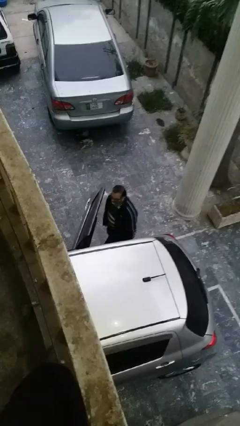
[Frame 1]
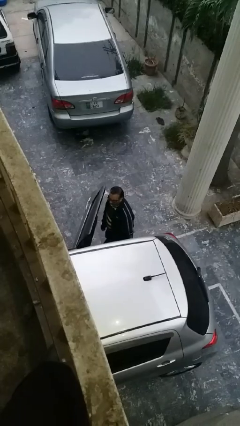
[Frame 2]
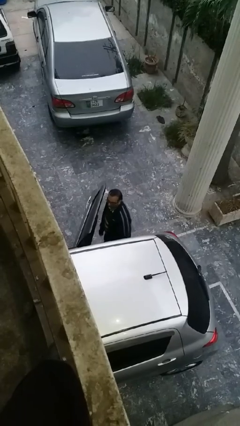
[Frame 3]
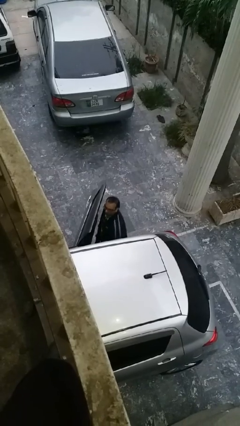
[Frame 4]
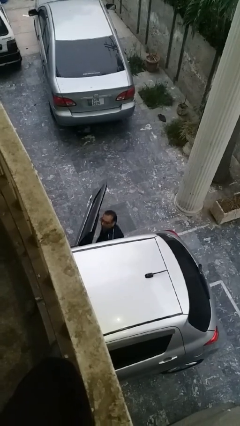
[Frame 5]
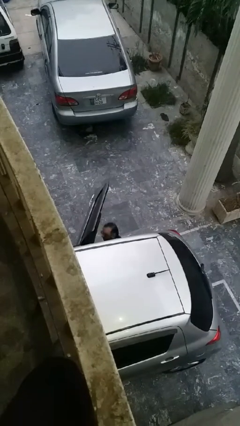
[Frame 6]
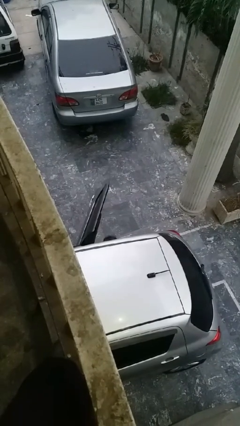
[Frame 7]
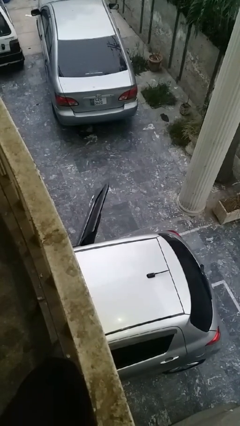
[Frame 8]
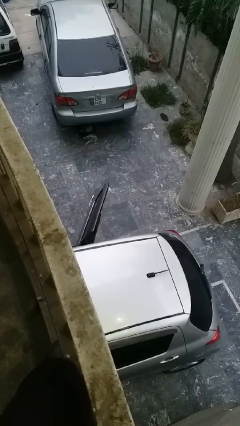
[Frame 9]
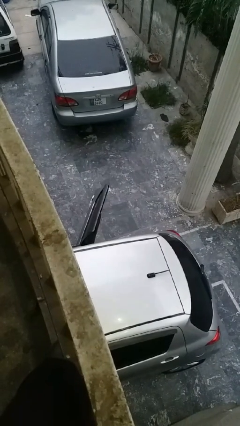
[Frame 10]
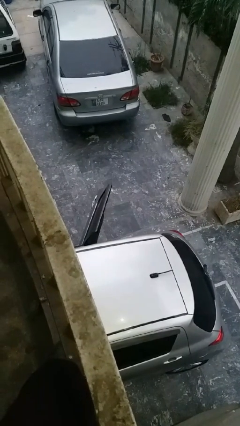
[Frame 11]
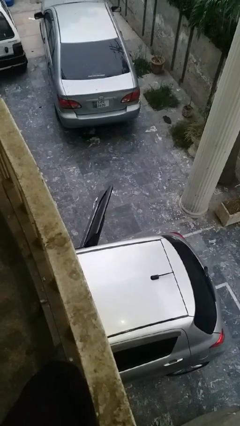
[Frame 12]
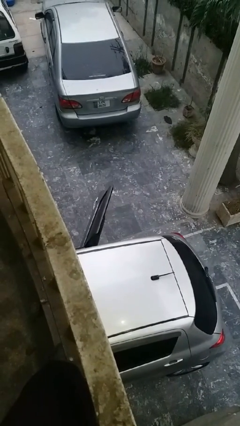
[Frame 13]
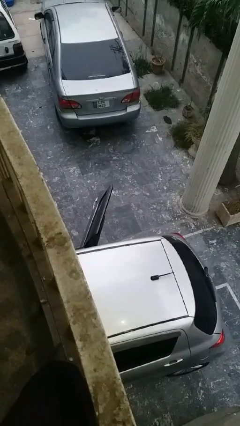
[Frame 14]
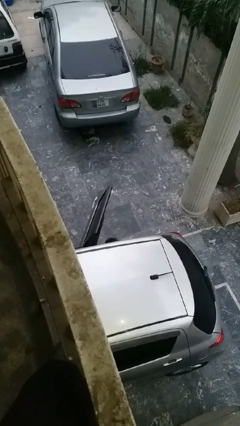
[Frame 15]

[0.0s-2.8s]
person enters car

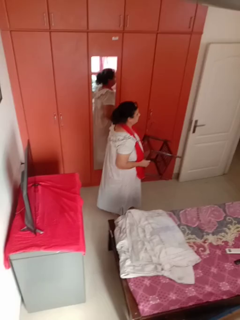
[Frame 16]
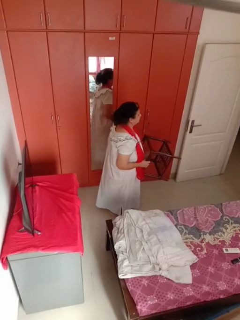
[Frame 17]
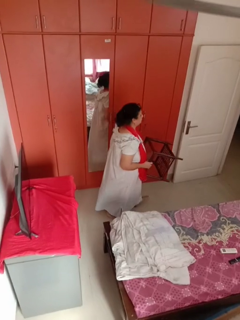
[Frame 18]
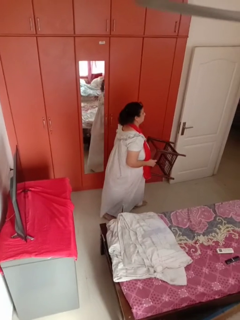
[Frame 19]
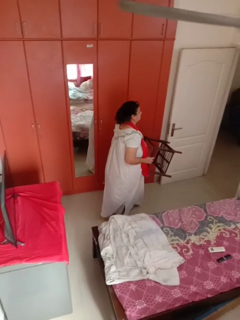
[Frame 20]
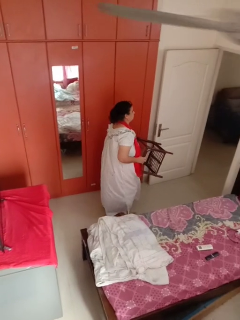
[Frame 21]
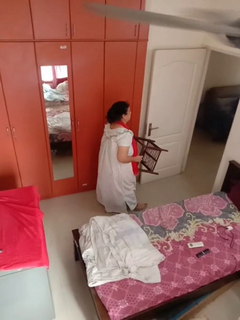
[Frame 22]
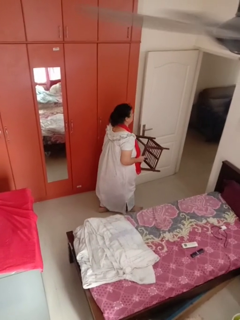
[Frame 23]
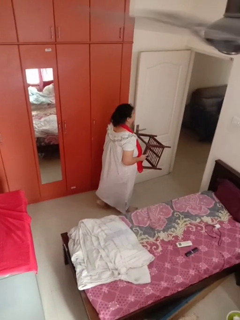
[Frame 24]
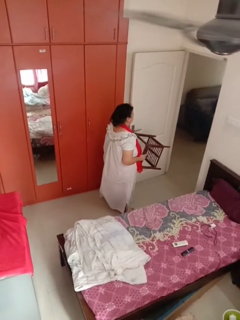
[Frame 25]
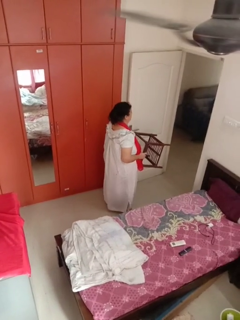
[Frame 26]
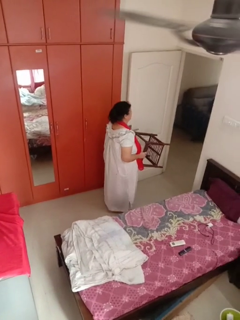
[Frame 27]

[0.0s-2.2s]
person carries furniture

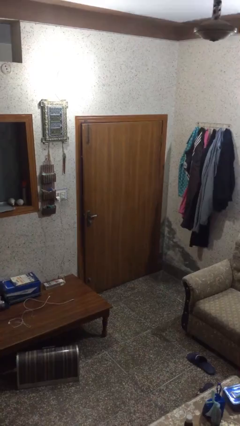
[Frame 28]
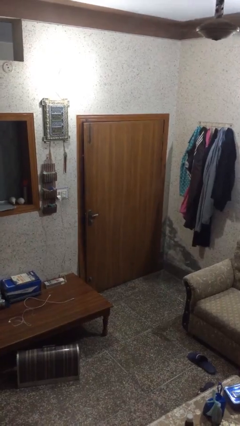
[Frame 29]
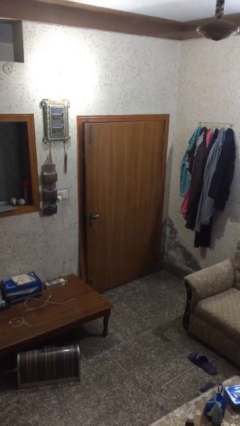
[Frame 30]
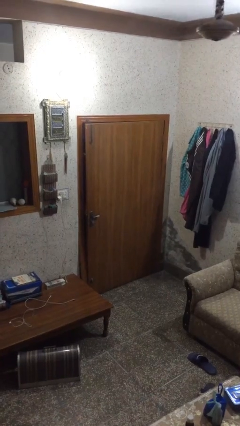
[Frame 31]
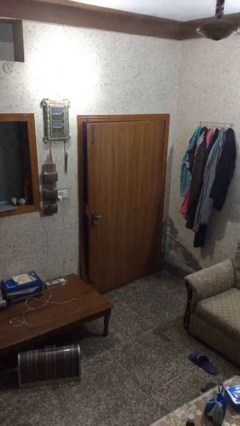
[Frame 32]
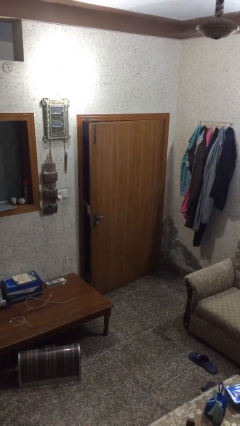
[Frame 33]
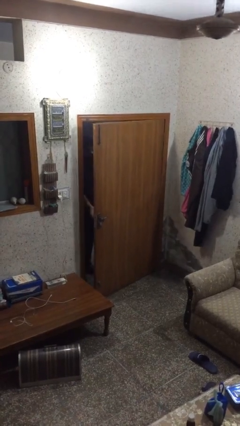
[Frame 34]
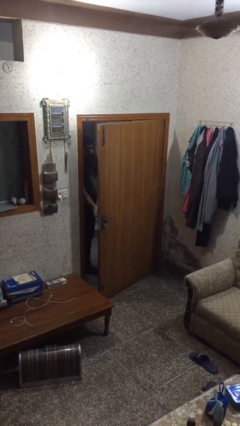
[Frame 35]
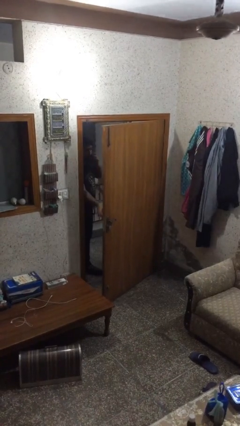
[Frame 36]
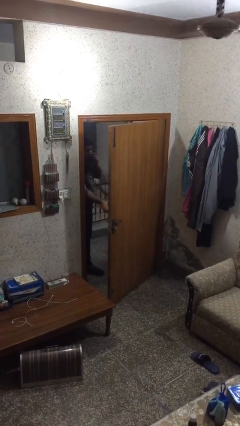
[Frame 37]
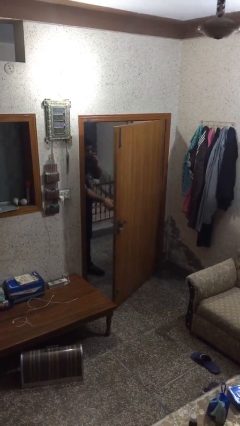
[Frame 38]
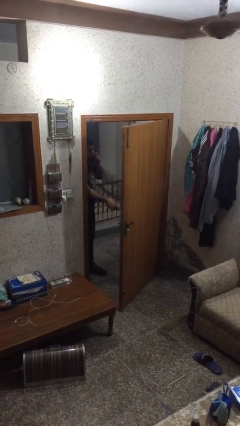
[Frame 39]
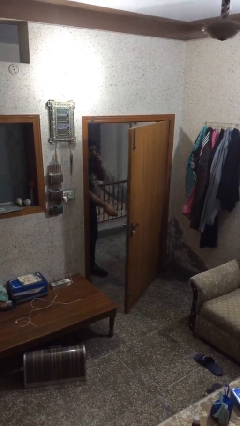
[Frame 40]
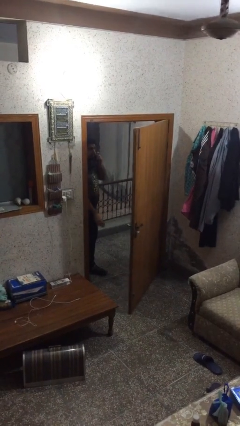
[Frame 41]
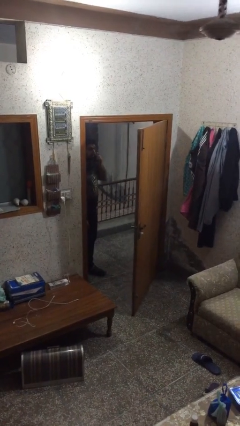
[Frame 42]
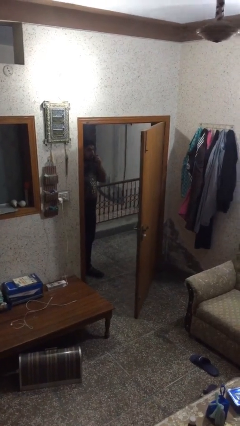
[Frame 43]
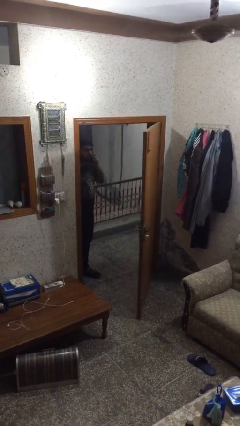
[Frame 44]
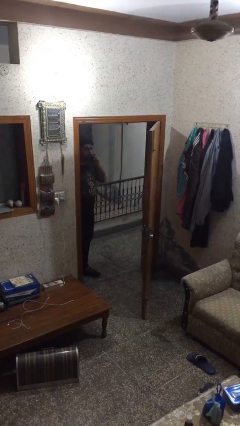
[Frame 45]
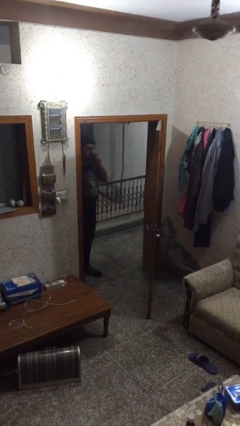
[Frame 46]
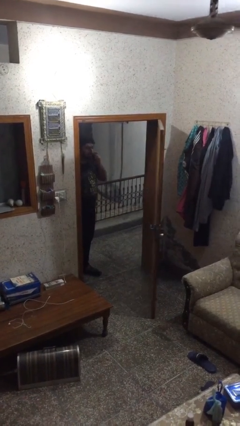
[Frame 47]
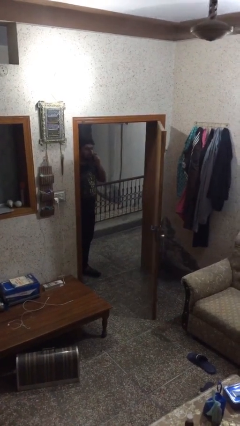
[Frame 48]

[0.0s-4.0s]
person opens facility door

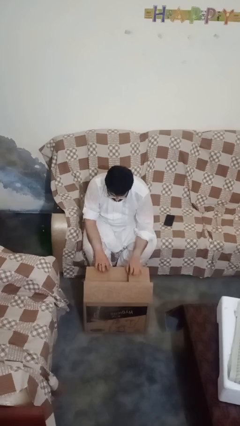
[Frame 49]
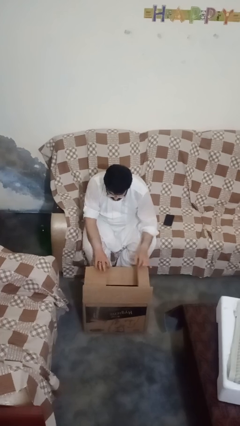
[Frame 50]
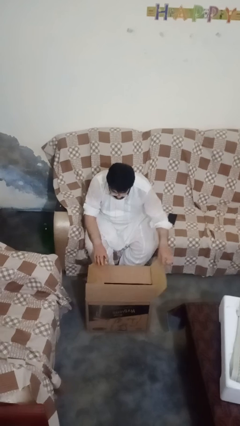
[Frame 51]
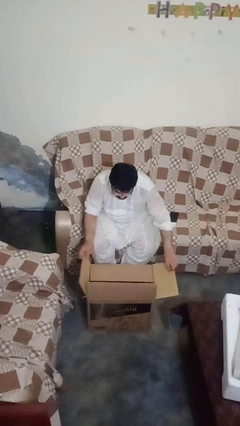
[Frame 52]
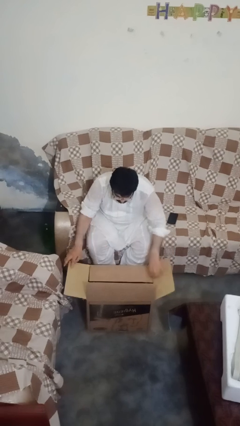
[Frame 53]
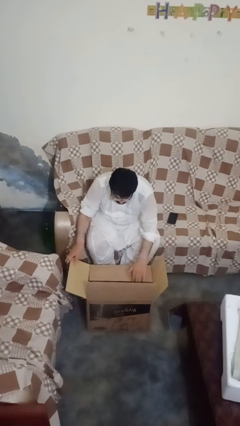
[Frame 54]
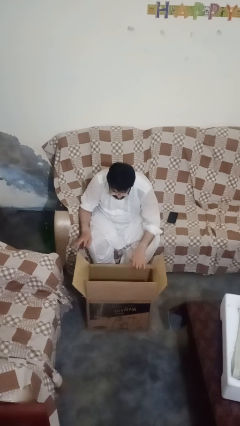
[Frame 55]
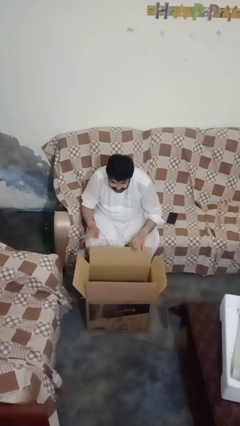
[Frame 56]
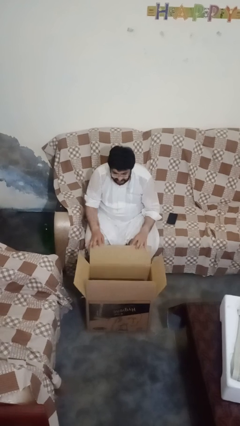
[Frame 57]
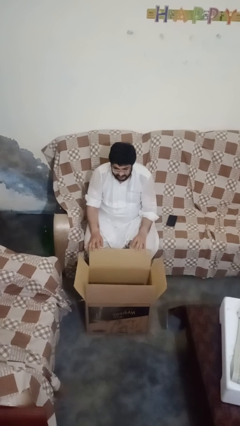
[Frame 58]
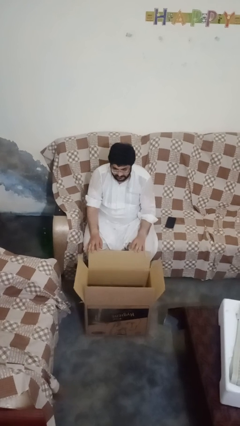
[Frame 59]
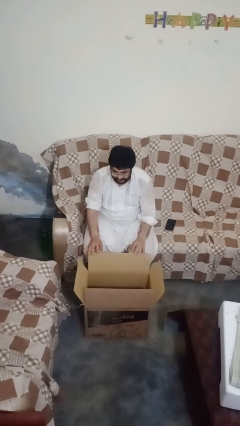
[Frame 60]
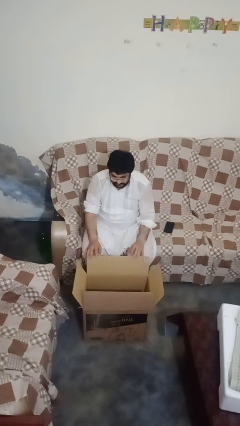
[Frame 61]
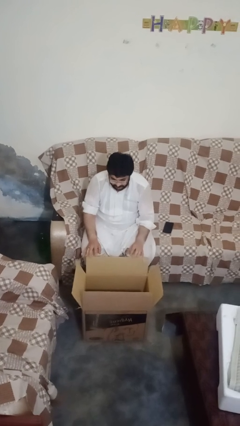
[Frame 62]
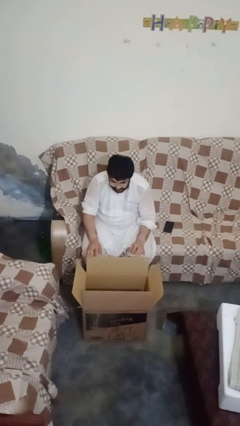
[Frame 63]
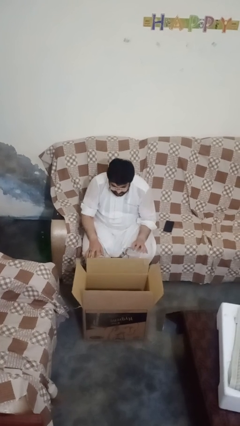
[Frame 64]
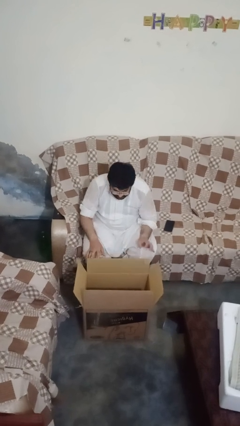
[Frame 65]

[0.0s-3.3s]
person opens box

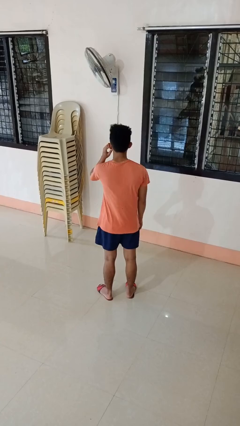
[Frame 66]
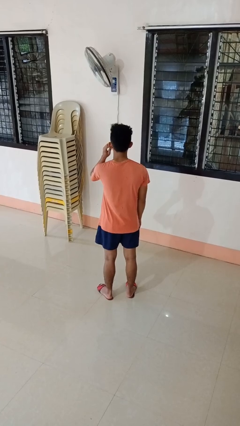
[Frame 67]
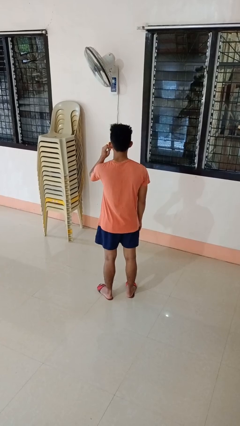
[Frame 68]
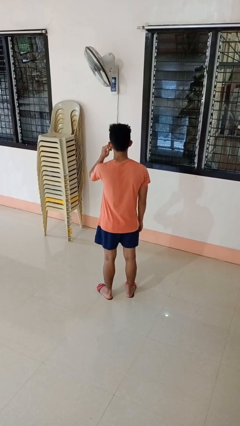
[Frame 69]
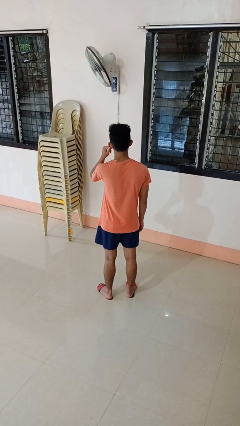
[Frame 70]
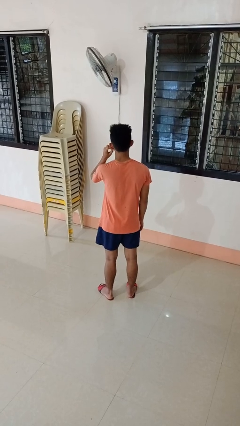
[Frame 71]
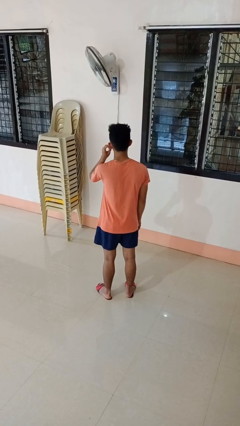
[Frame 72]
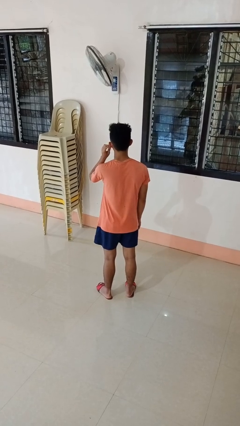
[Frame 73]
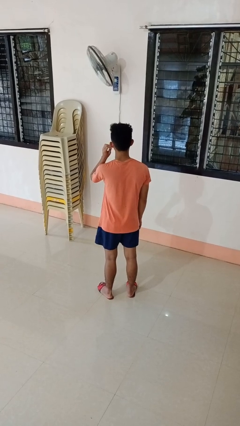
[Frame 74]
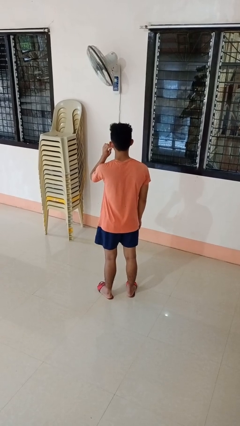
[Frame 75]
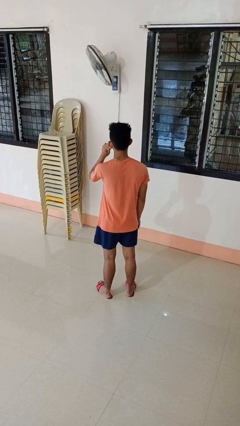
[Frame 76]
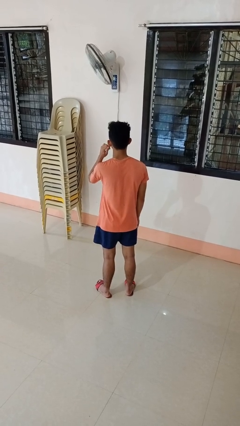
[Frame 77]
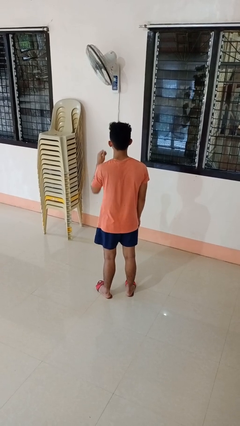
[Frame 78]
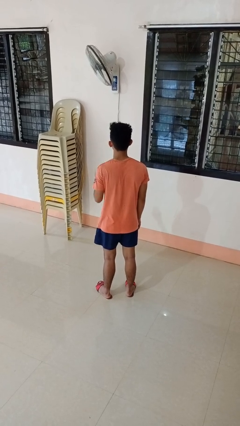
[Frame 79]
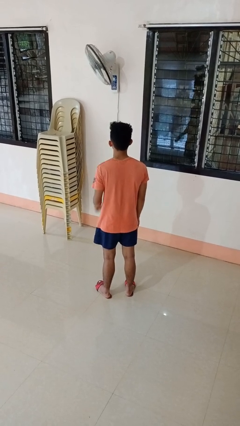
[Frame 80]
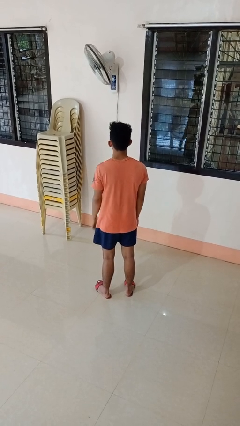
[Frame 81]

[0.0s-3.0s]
person touches earlobe

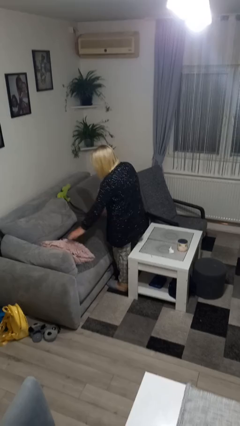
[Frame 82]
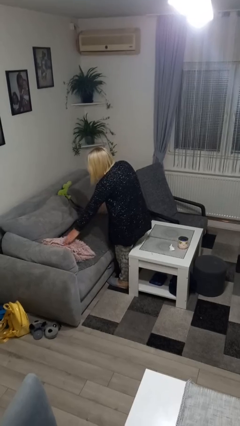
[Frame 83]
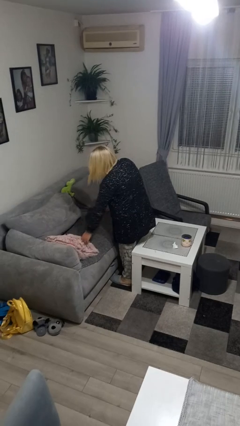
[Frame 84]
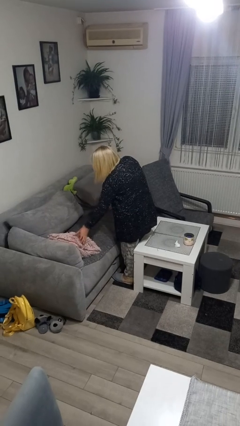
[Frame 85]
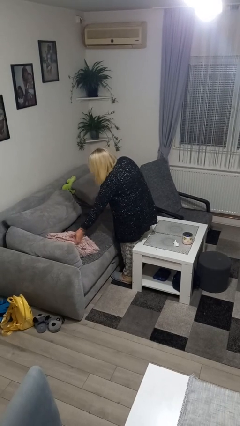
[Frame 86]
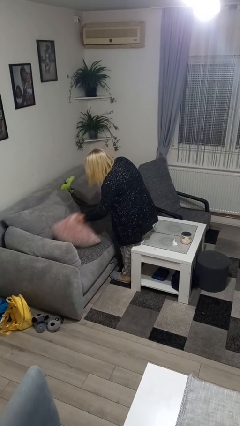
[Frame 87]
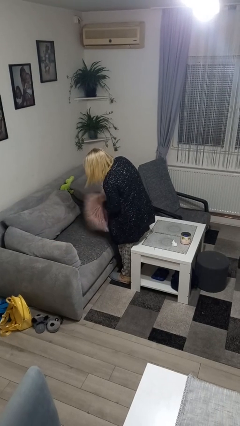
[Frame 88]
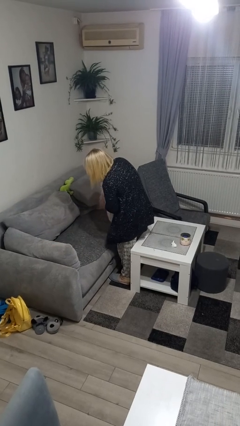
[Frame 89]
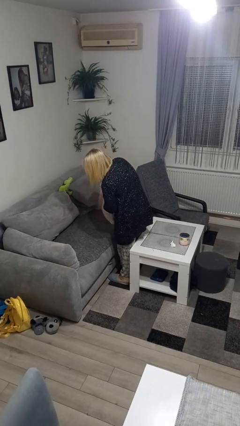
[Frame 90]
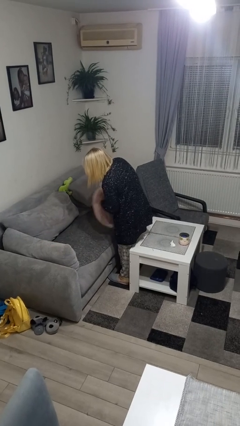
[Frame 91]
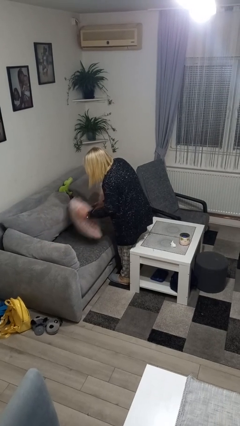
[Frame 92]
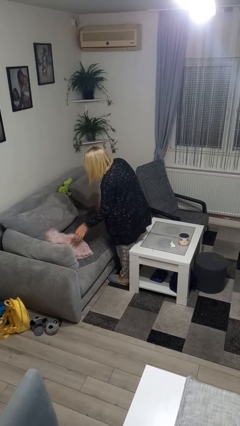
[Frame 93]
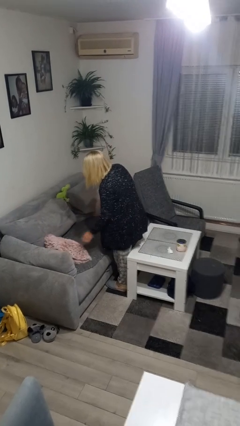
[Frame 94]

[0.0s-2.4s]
person searches in couch
